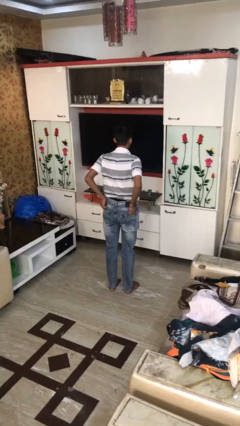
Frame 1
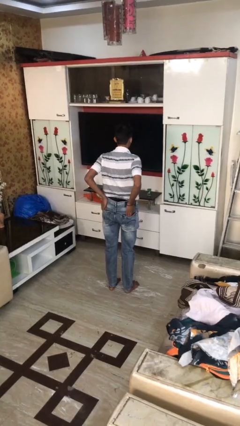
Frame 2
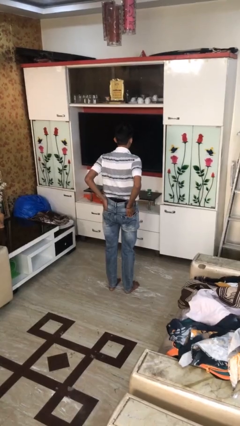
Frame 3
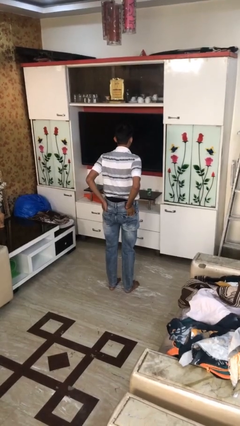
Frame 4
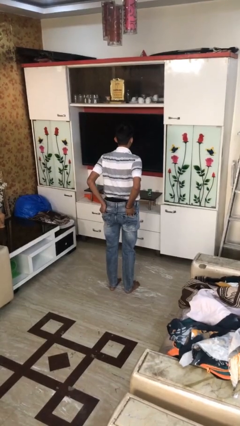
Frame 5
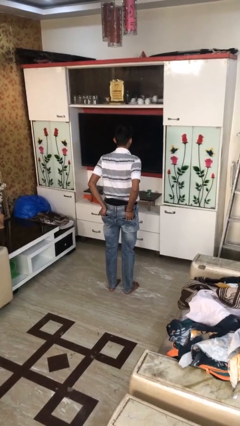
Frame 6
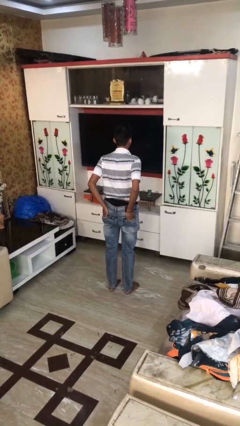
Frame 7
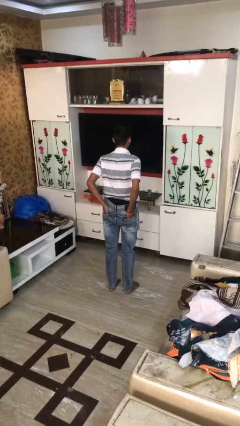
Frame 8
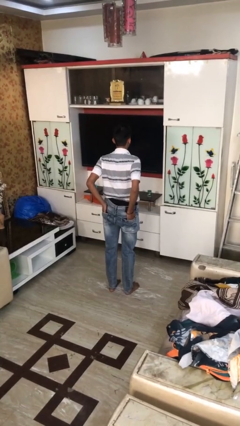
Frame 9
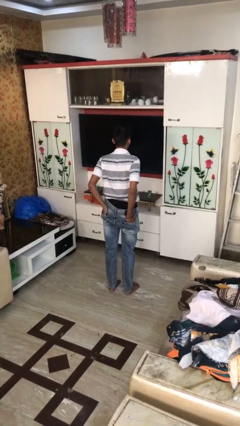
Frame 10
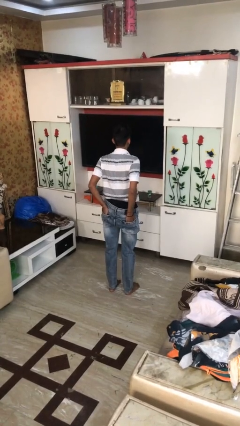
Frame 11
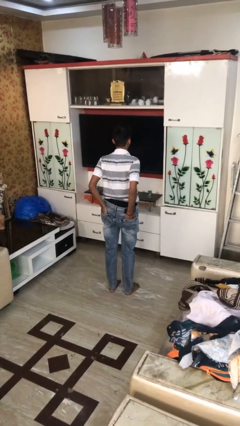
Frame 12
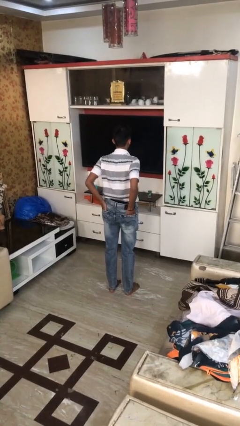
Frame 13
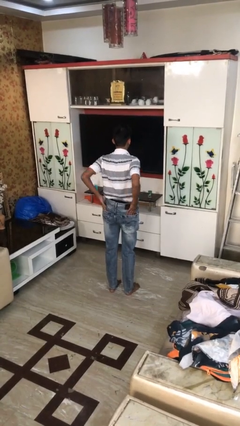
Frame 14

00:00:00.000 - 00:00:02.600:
person puts hands in back pockets

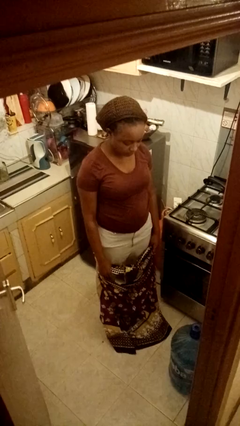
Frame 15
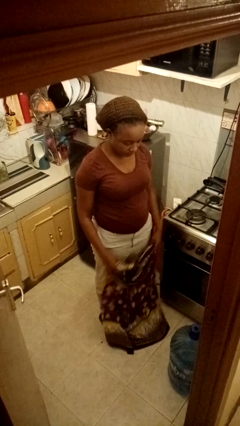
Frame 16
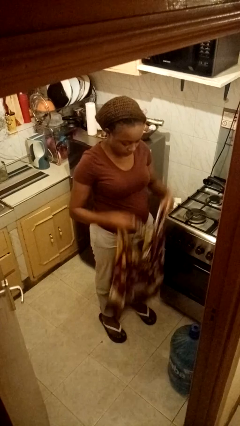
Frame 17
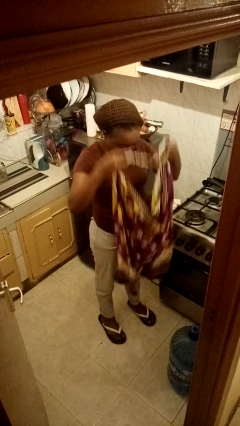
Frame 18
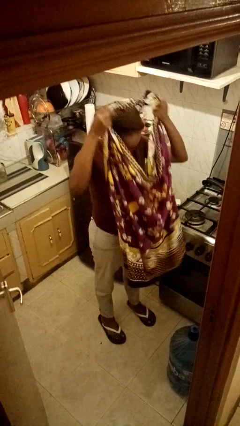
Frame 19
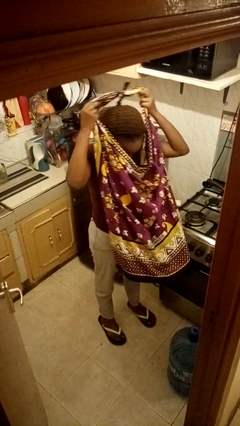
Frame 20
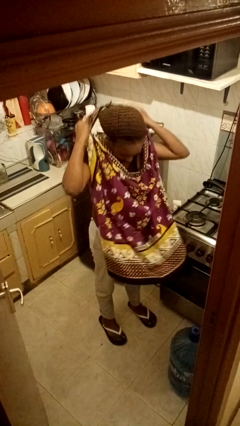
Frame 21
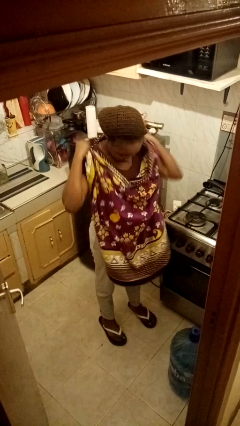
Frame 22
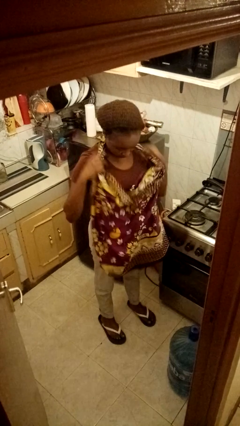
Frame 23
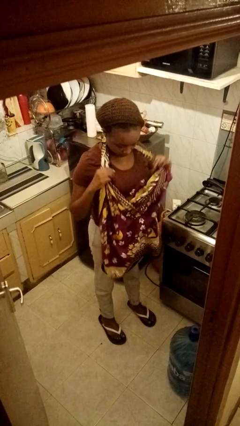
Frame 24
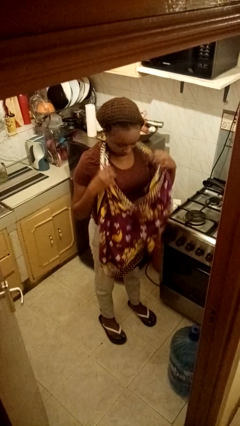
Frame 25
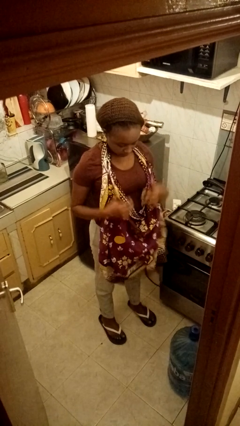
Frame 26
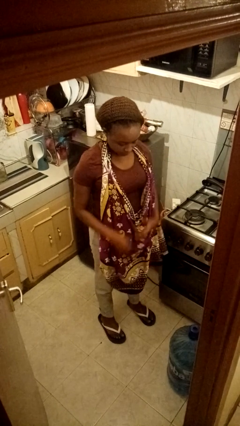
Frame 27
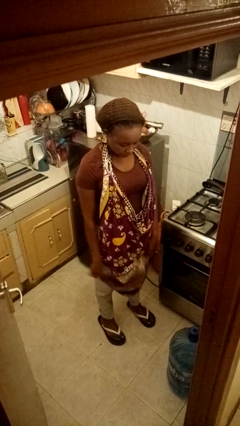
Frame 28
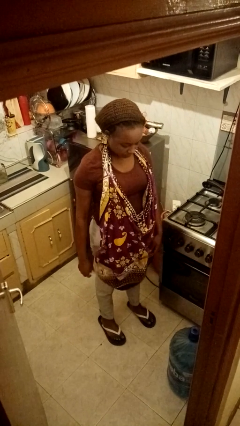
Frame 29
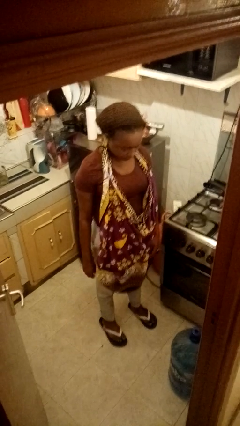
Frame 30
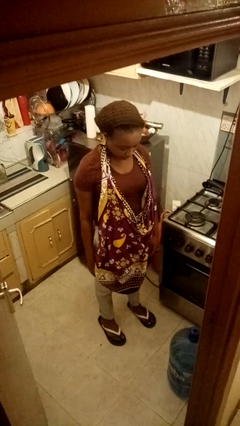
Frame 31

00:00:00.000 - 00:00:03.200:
person puts on apron

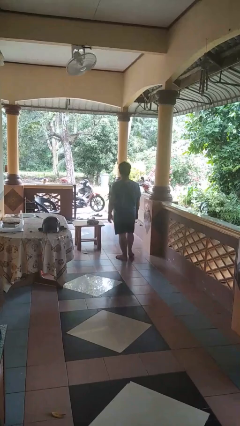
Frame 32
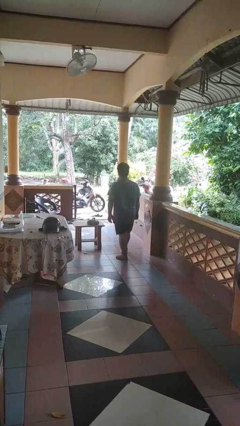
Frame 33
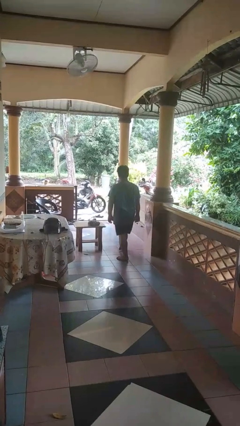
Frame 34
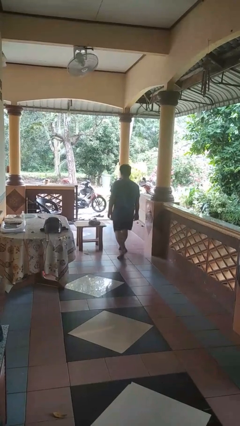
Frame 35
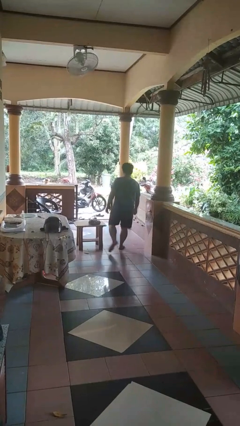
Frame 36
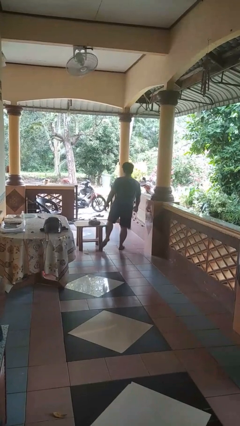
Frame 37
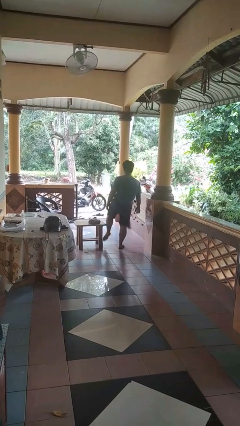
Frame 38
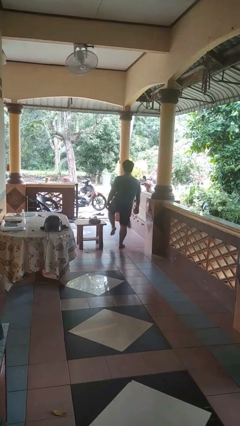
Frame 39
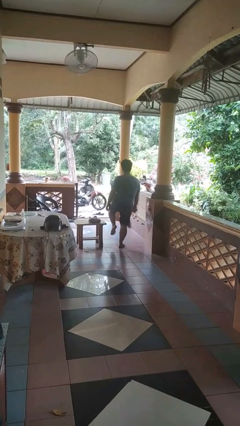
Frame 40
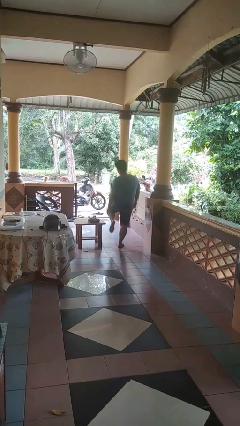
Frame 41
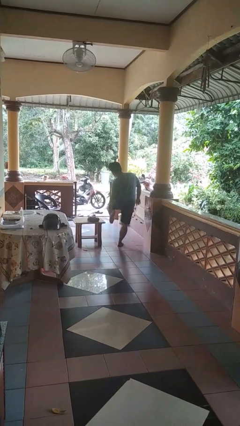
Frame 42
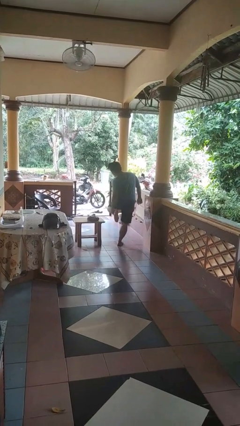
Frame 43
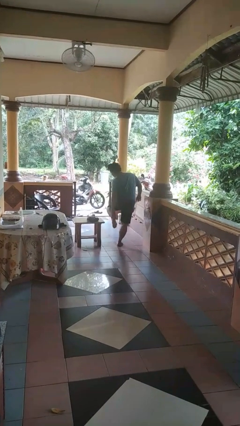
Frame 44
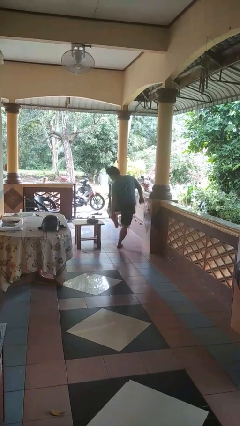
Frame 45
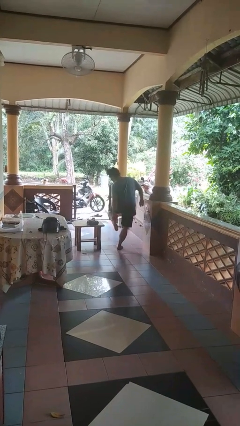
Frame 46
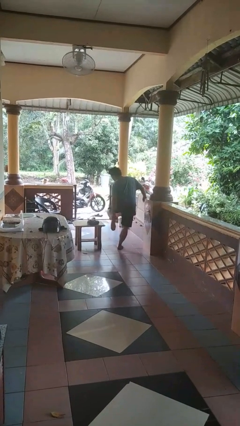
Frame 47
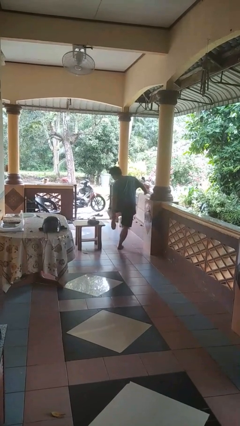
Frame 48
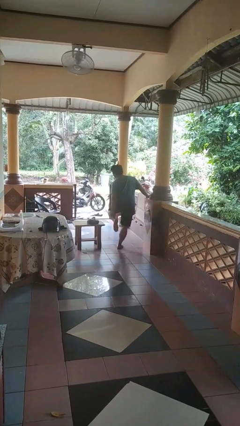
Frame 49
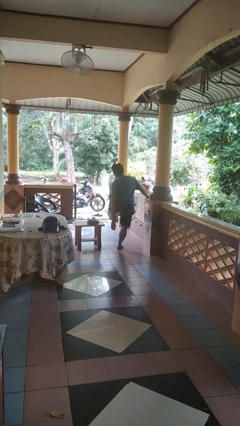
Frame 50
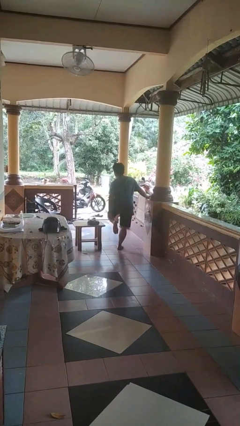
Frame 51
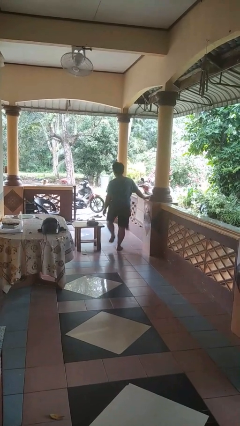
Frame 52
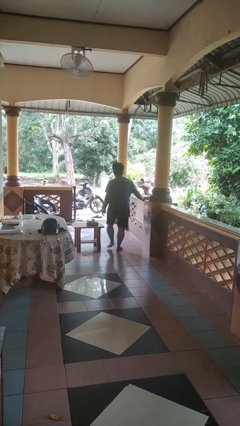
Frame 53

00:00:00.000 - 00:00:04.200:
person stubs toe

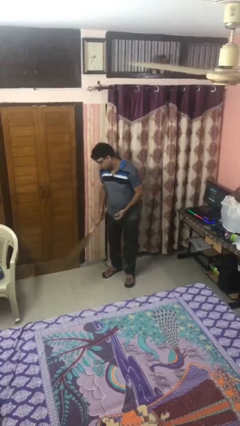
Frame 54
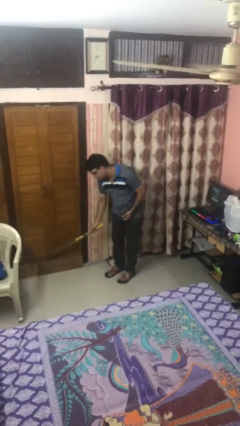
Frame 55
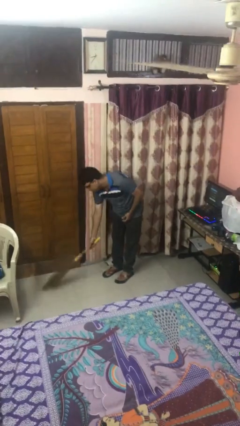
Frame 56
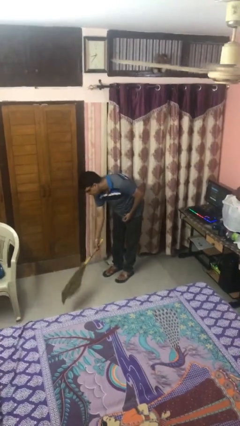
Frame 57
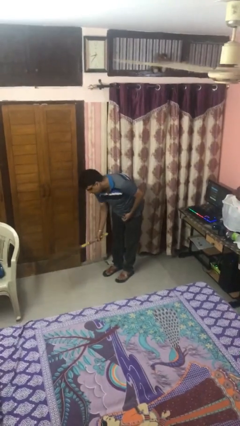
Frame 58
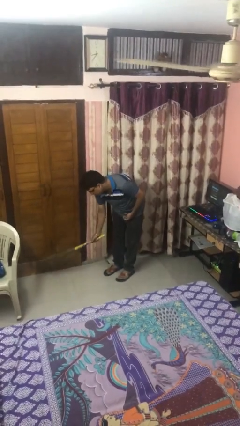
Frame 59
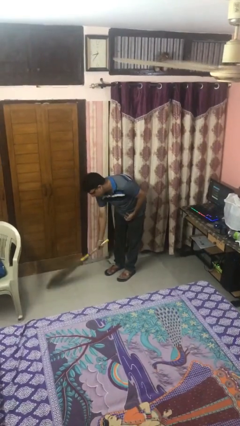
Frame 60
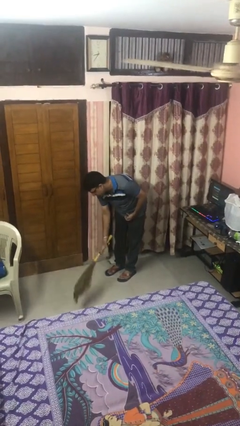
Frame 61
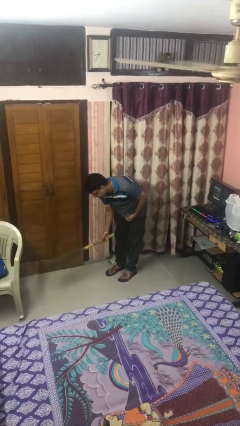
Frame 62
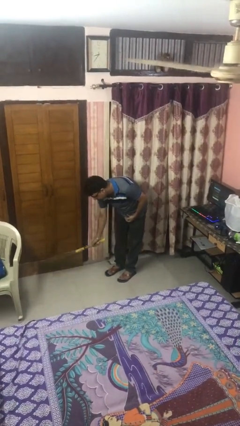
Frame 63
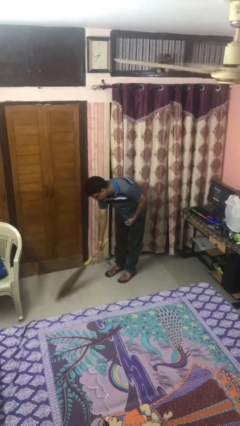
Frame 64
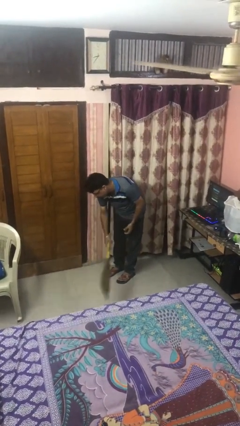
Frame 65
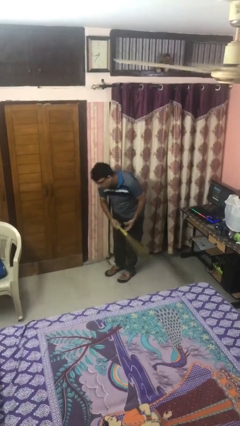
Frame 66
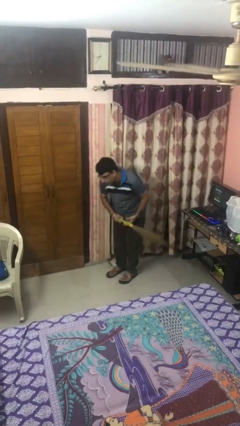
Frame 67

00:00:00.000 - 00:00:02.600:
person sweeps floor

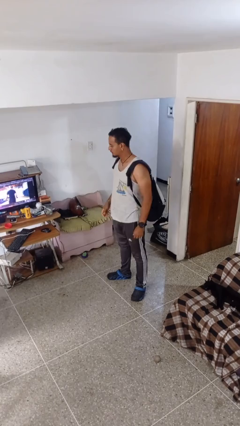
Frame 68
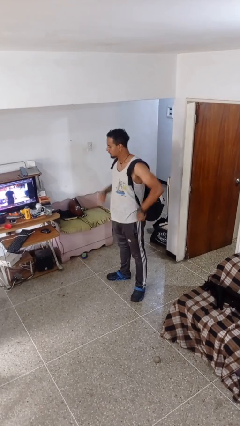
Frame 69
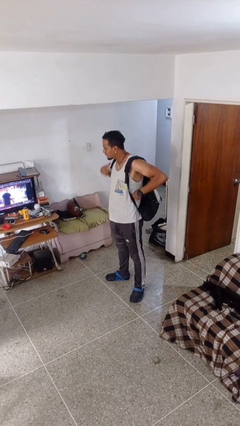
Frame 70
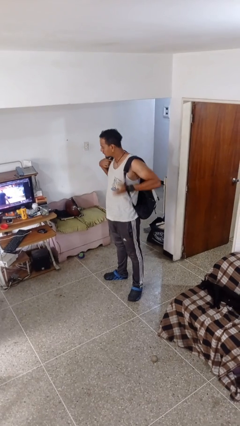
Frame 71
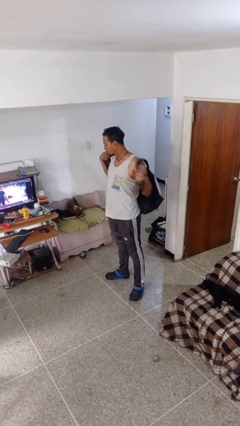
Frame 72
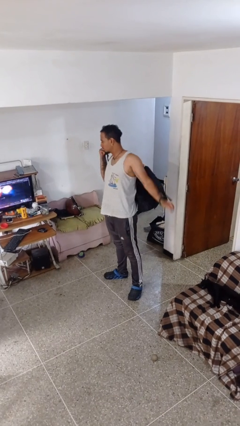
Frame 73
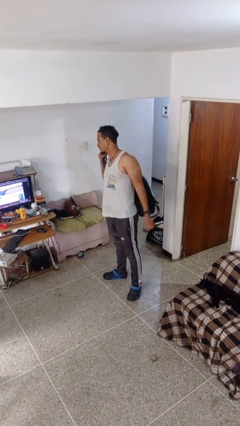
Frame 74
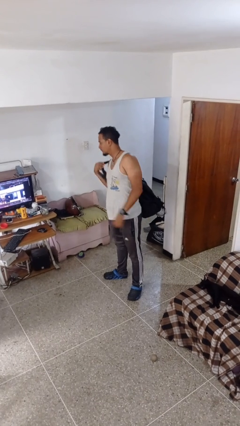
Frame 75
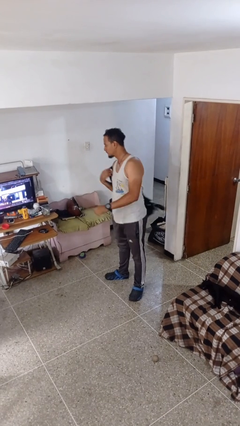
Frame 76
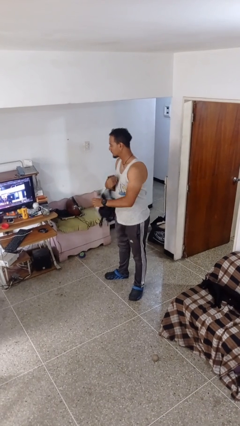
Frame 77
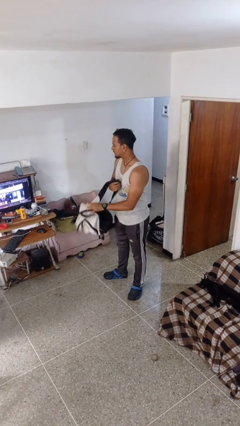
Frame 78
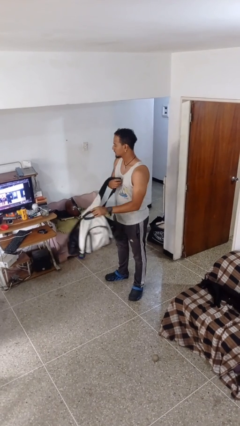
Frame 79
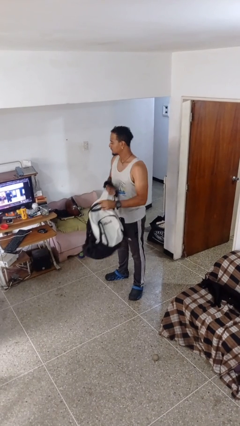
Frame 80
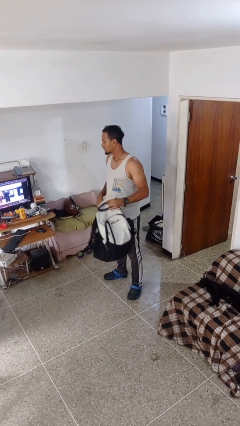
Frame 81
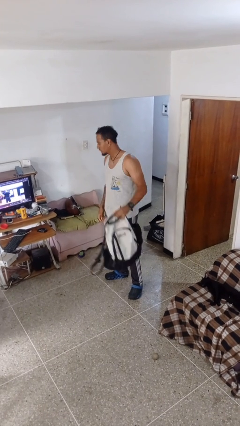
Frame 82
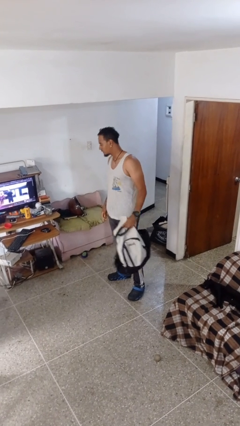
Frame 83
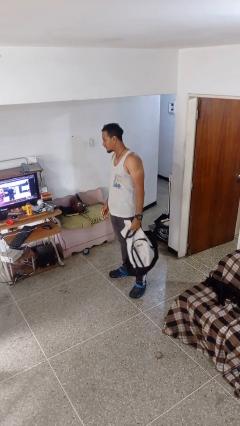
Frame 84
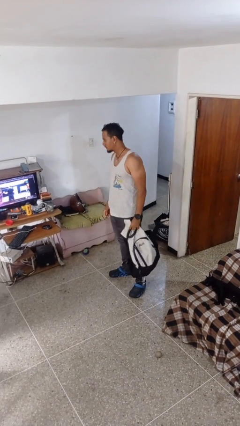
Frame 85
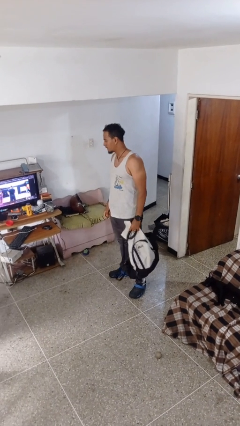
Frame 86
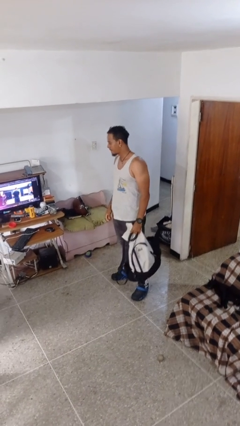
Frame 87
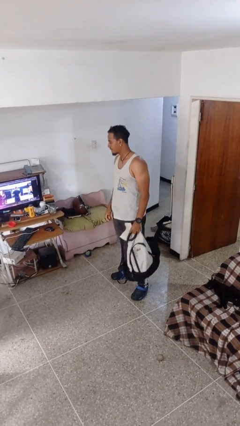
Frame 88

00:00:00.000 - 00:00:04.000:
person takes off backpack

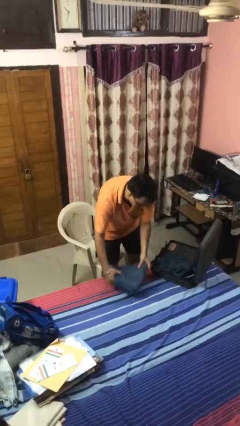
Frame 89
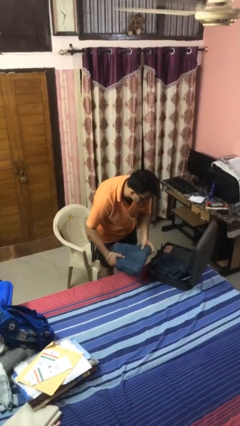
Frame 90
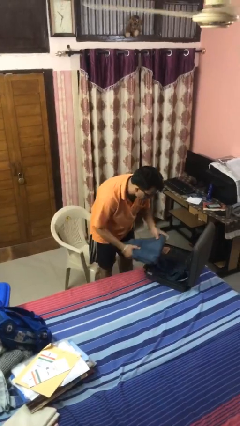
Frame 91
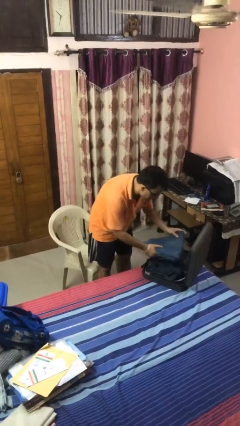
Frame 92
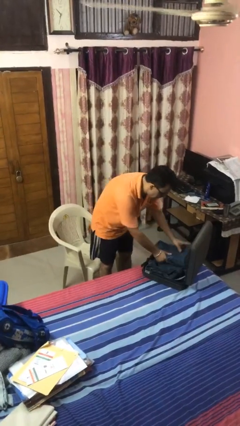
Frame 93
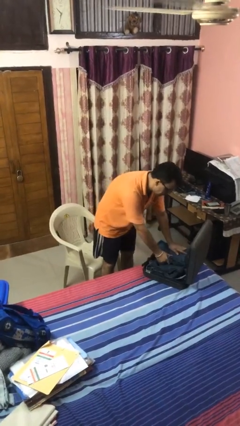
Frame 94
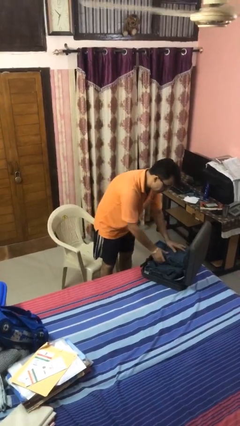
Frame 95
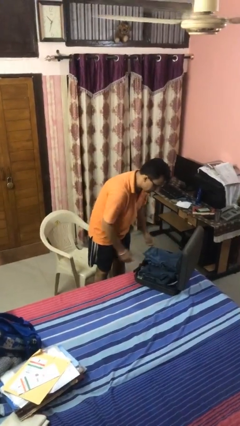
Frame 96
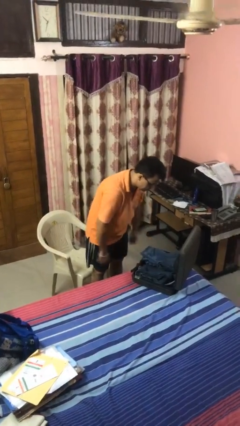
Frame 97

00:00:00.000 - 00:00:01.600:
person loads clothes into suitcase
